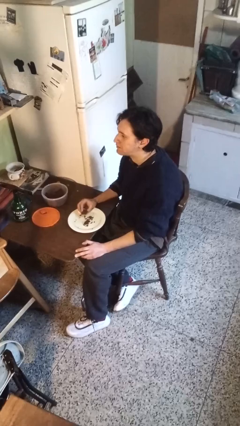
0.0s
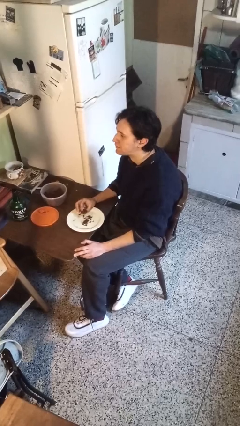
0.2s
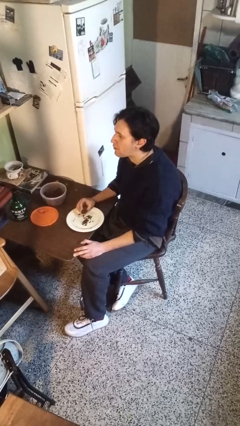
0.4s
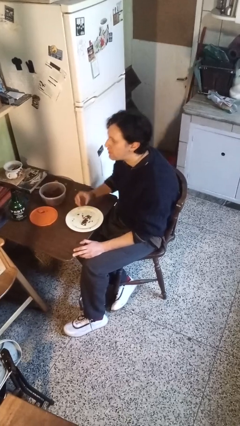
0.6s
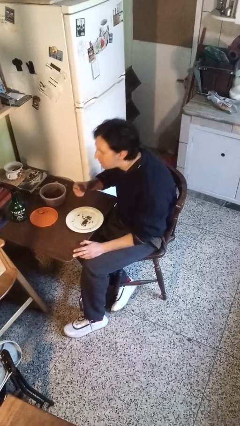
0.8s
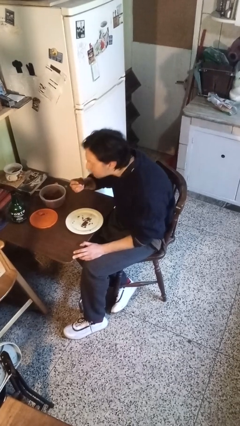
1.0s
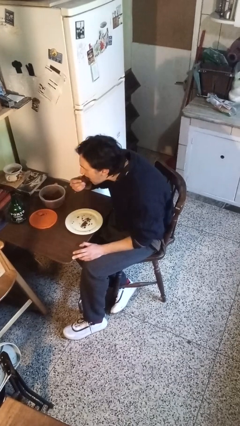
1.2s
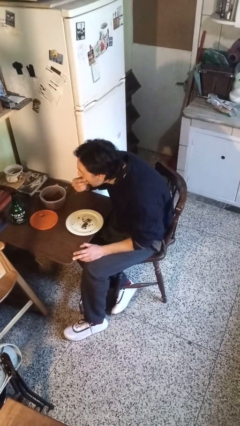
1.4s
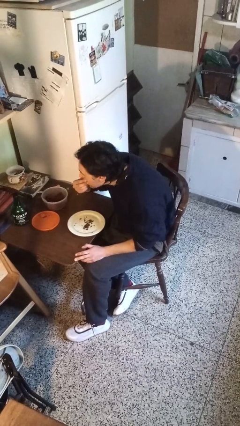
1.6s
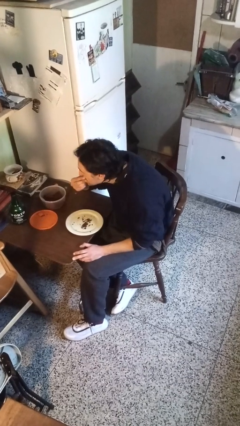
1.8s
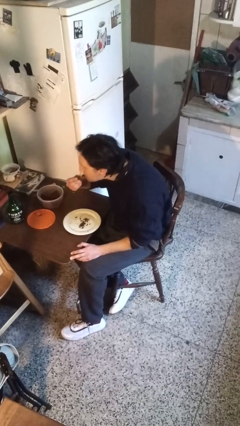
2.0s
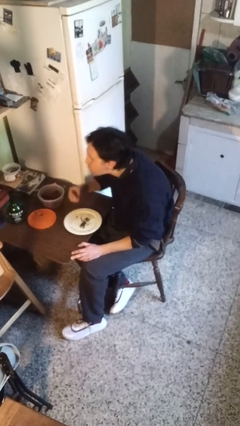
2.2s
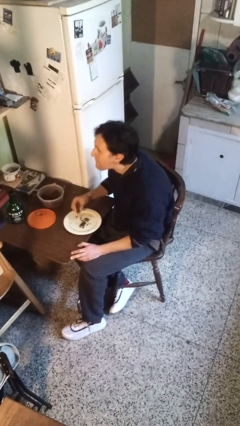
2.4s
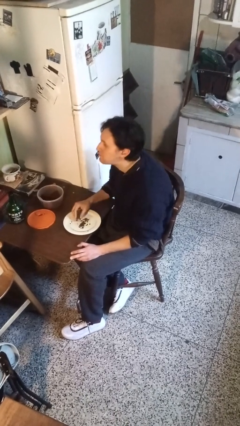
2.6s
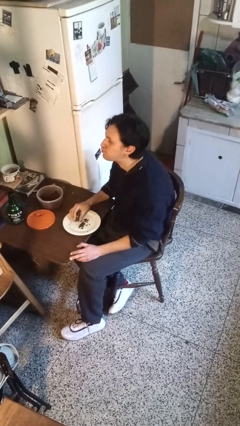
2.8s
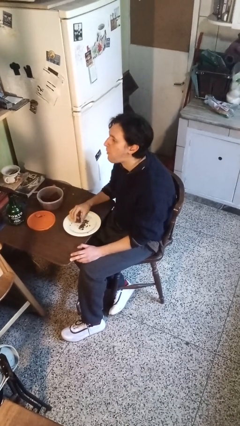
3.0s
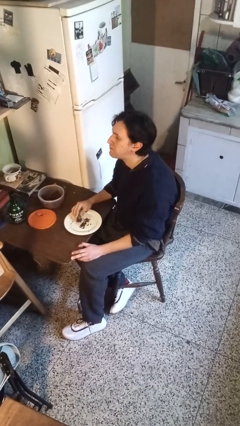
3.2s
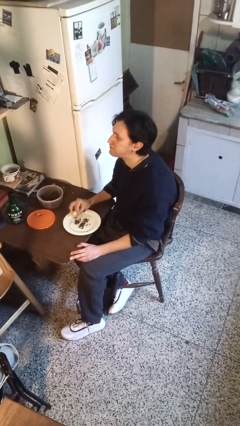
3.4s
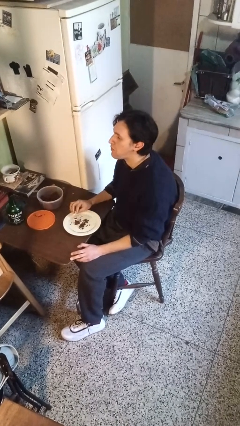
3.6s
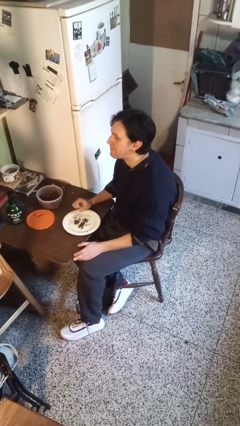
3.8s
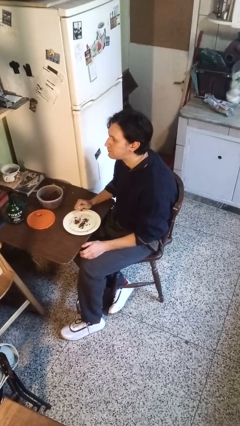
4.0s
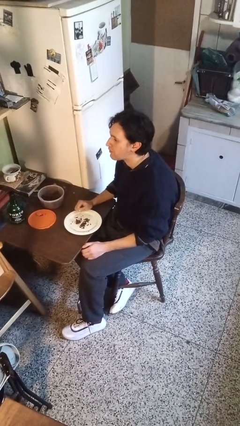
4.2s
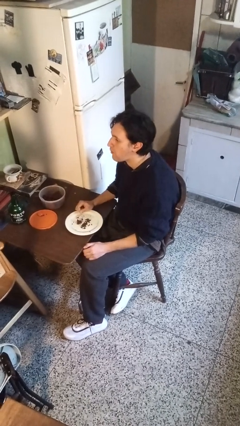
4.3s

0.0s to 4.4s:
person eats with hands

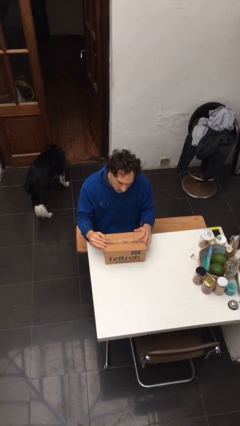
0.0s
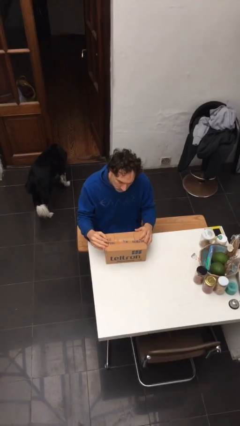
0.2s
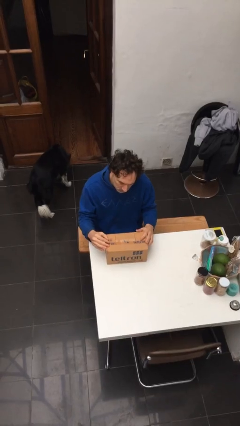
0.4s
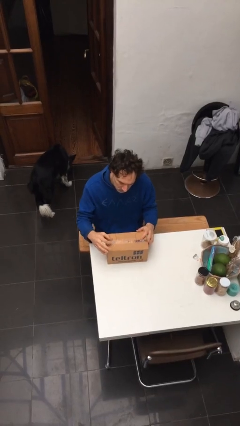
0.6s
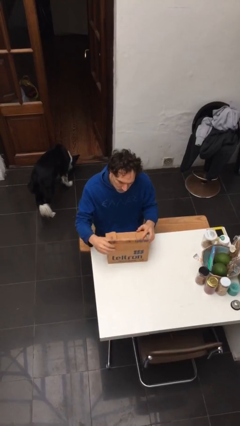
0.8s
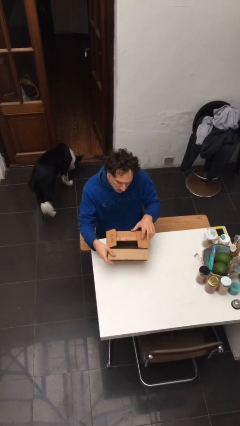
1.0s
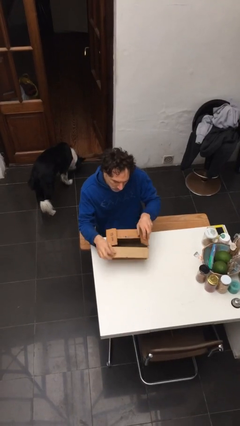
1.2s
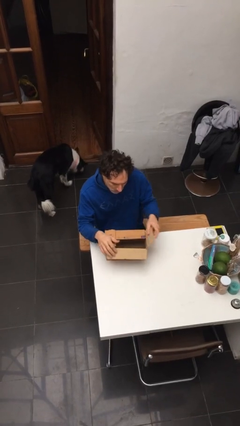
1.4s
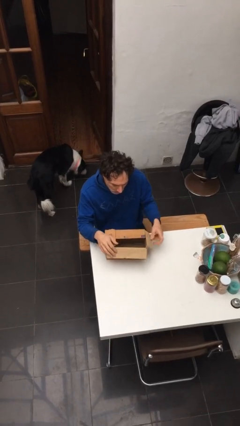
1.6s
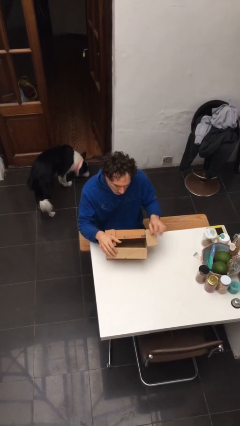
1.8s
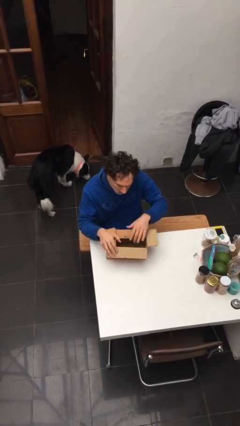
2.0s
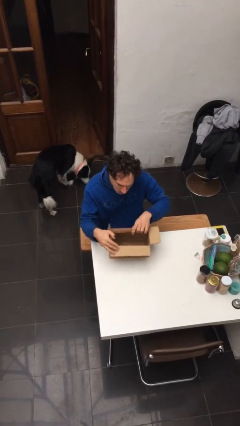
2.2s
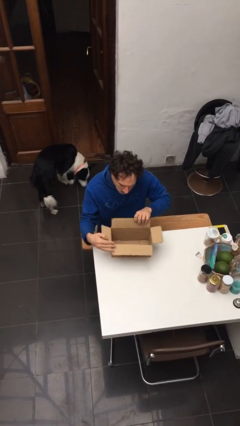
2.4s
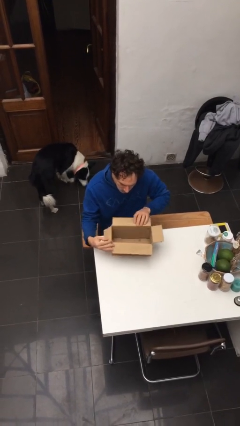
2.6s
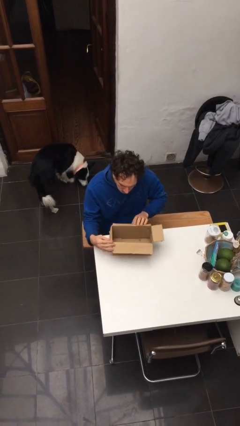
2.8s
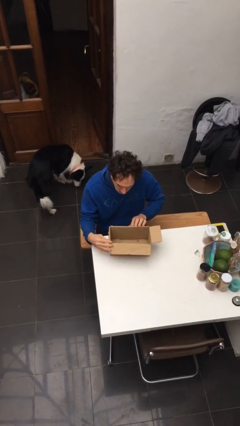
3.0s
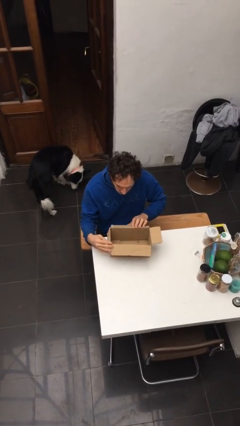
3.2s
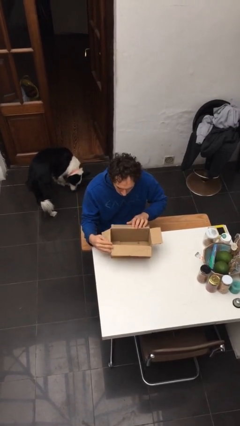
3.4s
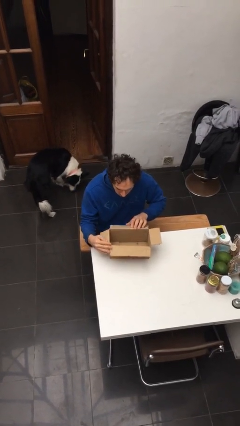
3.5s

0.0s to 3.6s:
person opens box

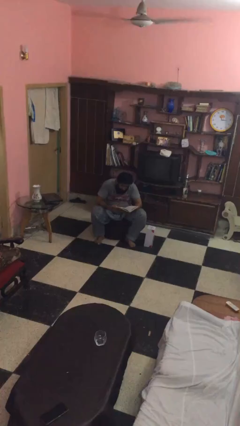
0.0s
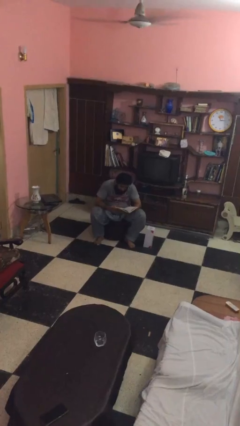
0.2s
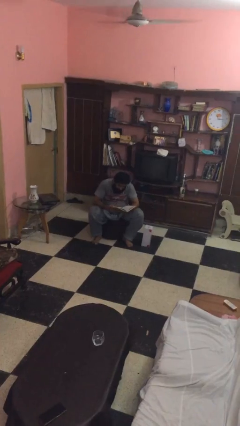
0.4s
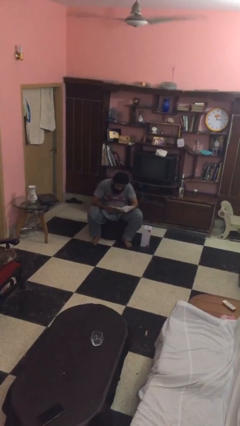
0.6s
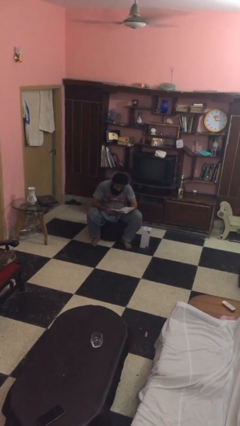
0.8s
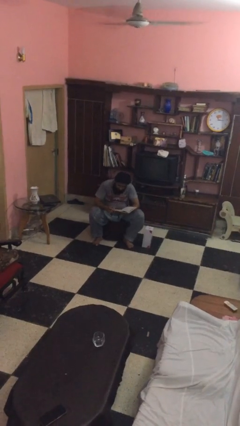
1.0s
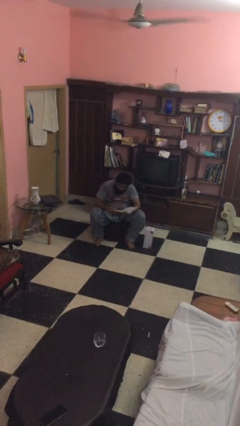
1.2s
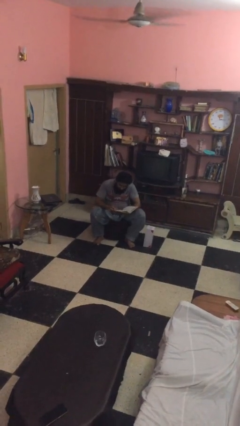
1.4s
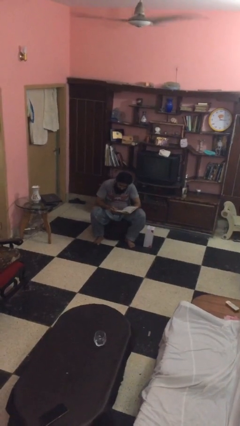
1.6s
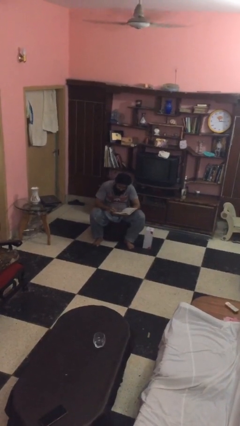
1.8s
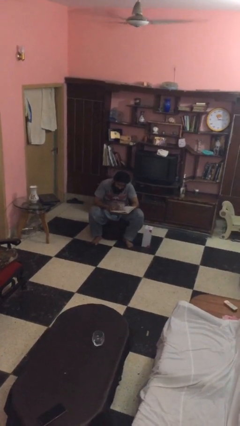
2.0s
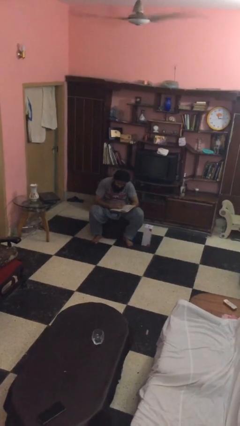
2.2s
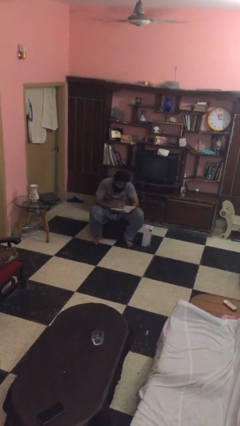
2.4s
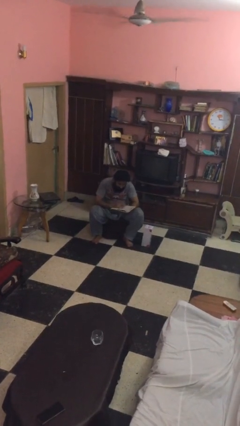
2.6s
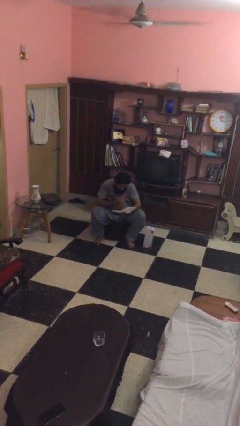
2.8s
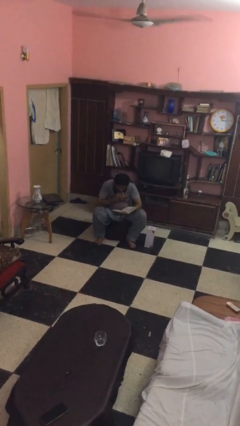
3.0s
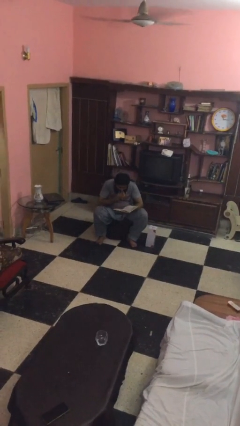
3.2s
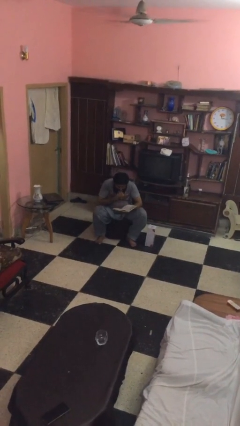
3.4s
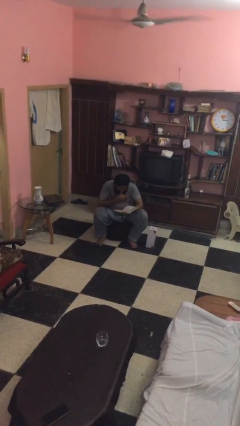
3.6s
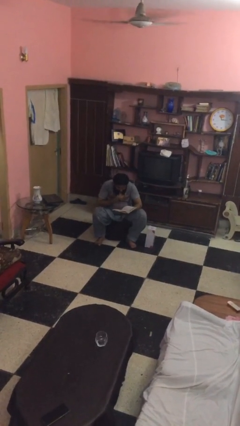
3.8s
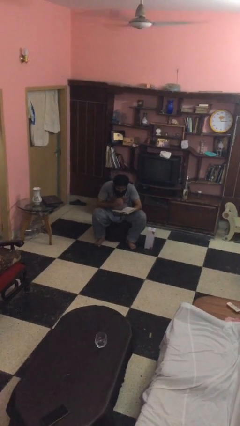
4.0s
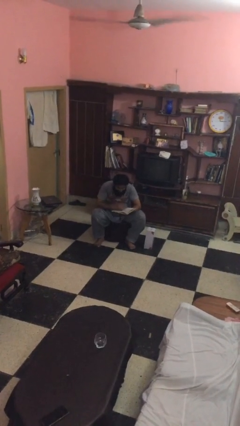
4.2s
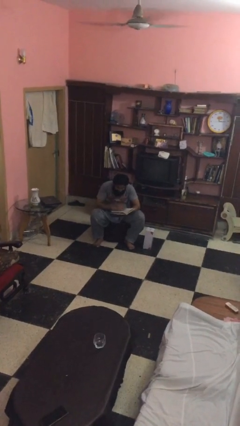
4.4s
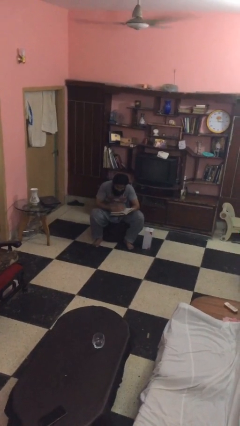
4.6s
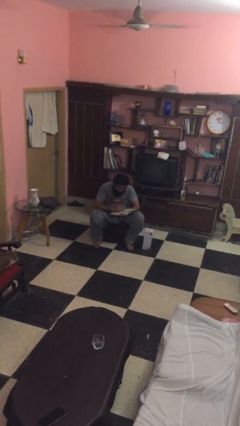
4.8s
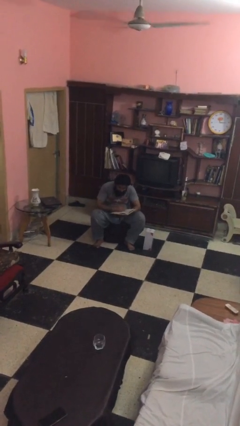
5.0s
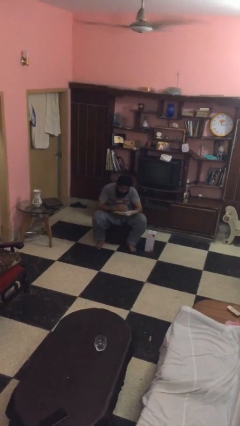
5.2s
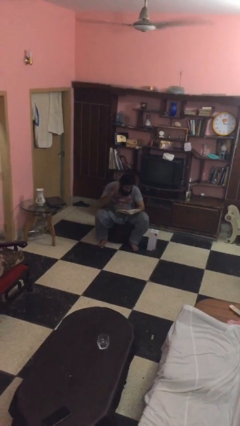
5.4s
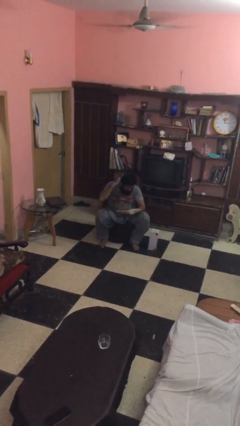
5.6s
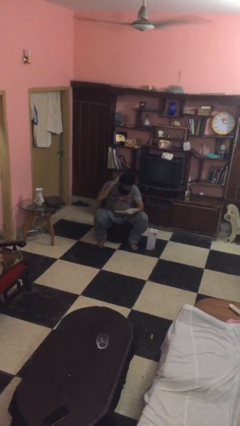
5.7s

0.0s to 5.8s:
person reads document

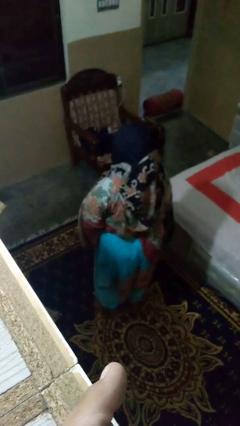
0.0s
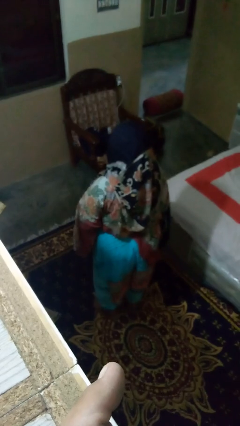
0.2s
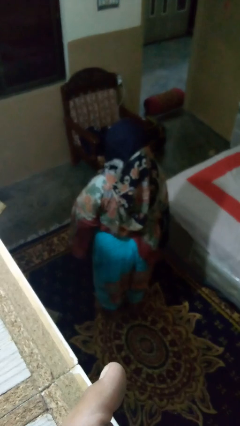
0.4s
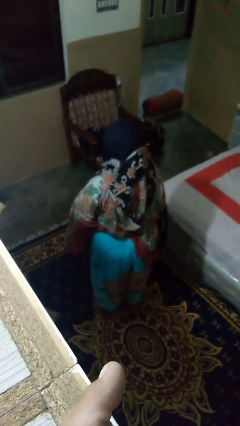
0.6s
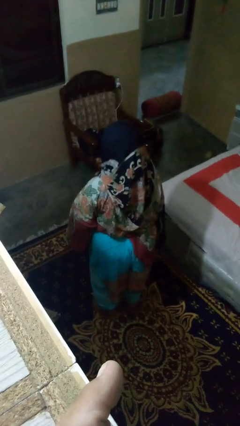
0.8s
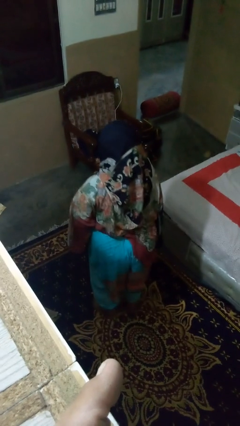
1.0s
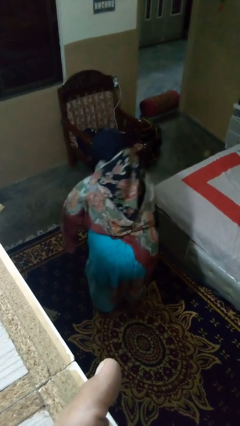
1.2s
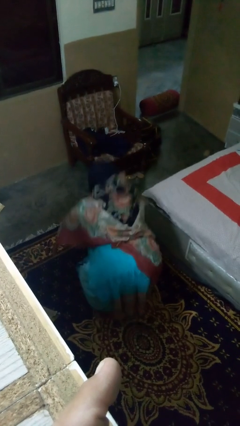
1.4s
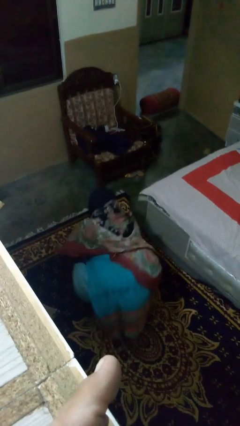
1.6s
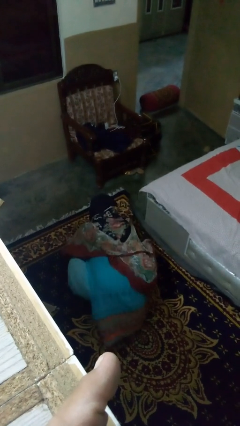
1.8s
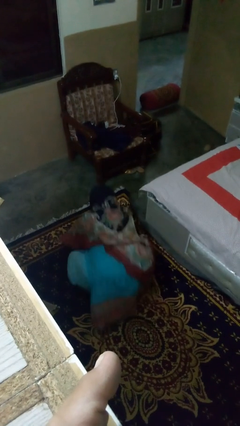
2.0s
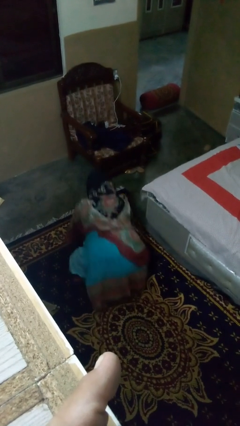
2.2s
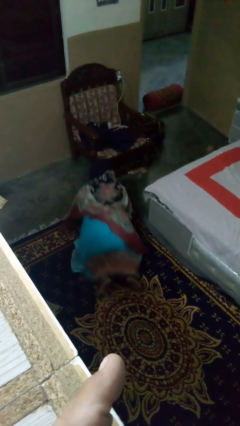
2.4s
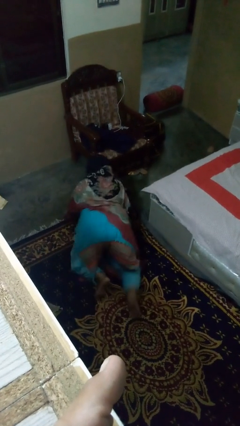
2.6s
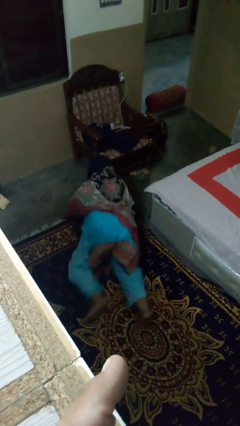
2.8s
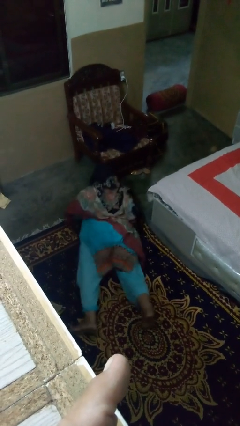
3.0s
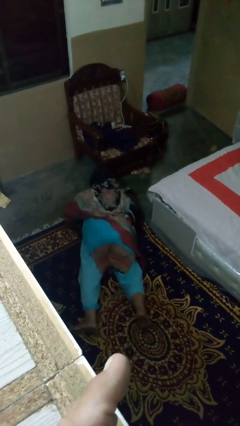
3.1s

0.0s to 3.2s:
person exercises with pushup

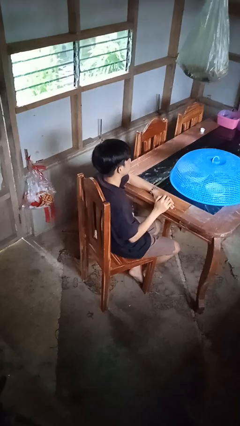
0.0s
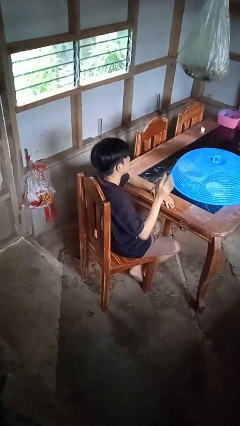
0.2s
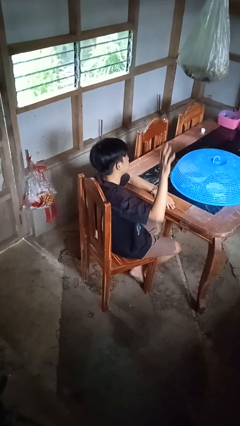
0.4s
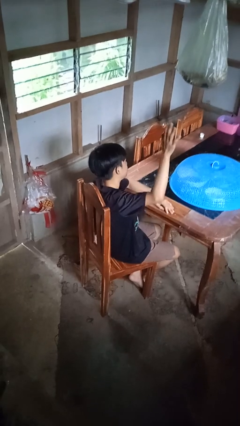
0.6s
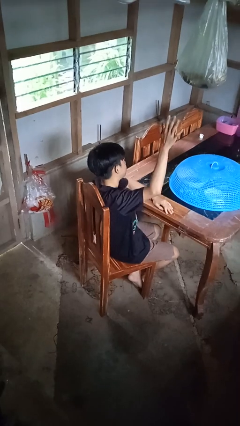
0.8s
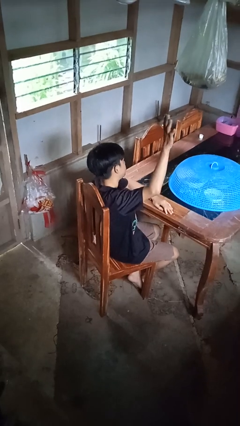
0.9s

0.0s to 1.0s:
person gestures raise hand
